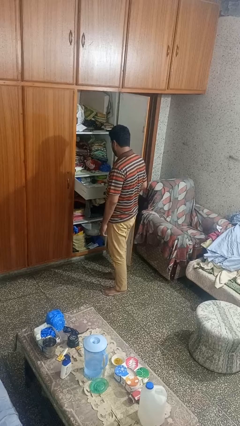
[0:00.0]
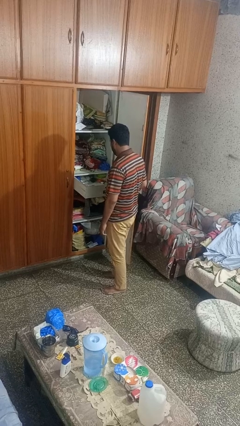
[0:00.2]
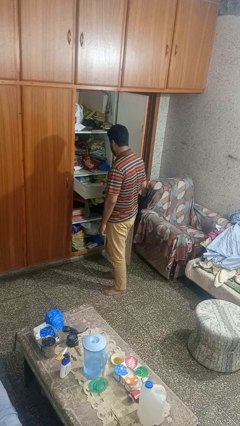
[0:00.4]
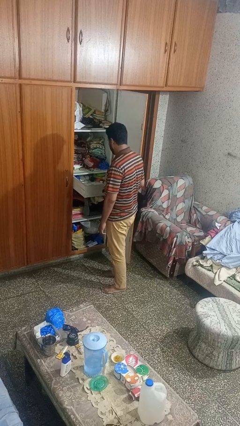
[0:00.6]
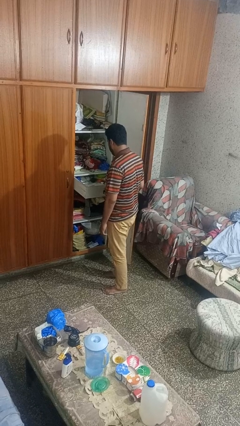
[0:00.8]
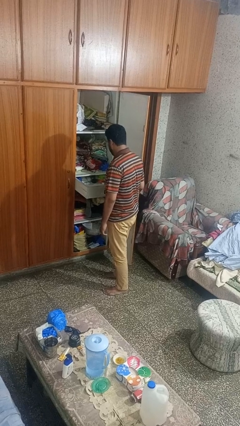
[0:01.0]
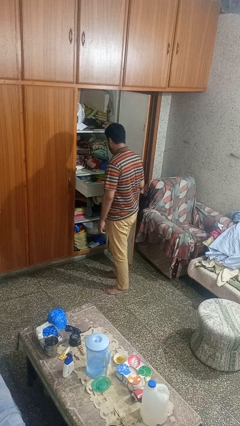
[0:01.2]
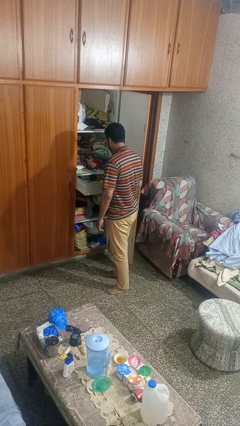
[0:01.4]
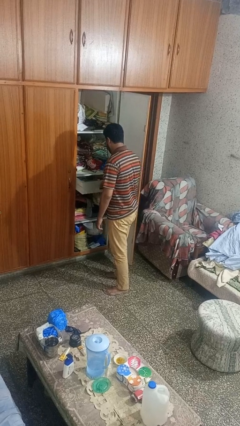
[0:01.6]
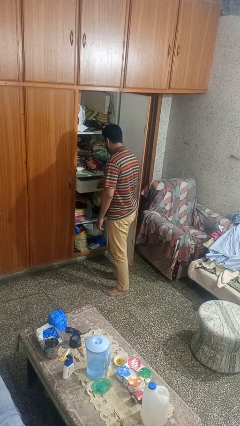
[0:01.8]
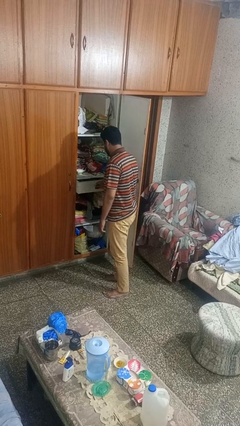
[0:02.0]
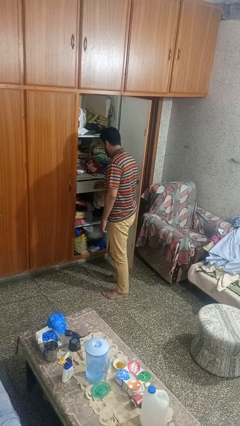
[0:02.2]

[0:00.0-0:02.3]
person closes dresser drawer

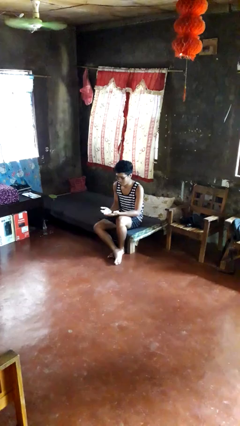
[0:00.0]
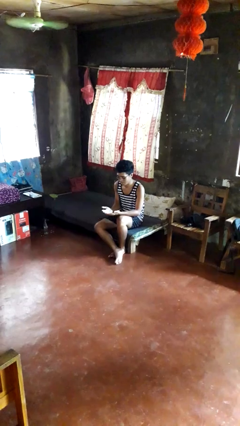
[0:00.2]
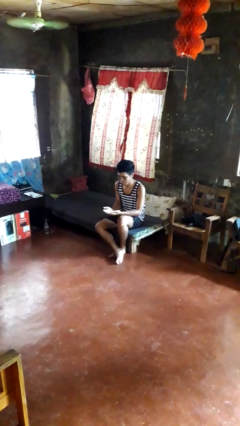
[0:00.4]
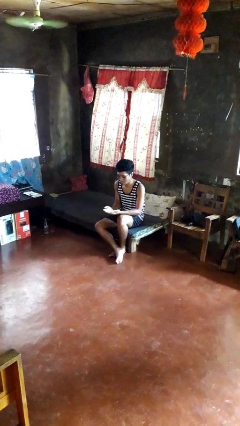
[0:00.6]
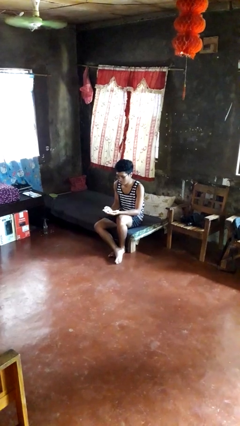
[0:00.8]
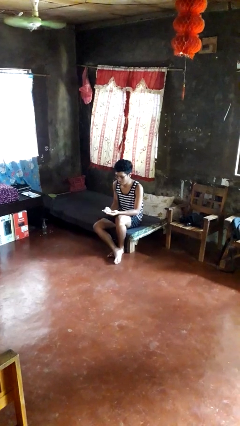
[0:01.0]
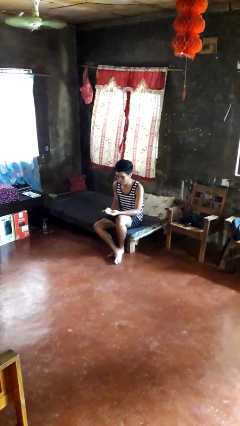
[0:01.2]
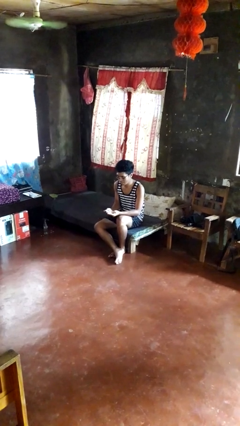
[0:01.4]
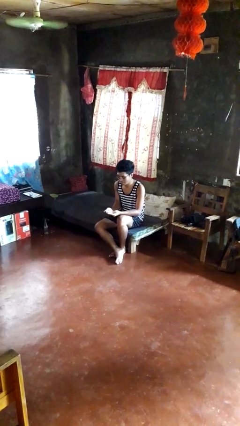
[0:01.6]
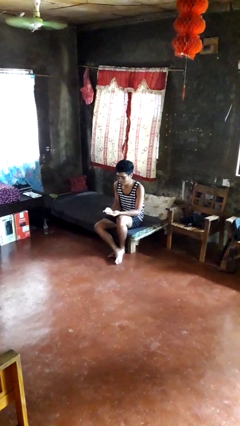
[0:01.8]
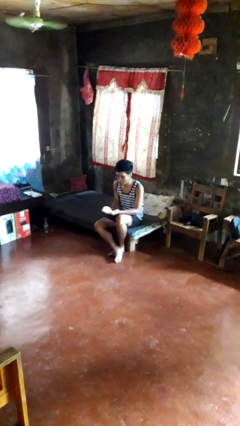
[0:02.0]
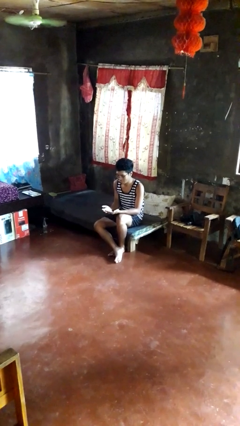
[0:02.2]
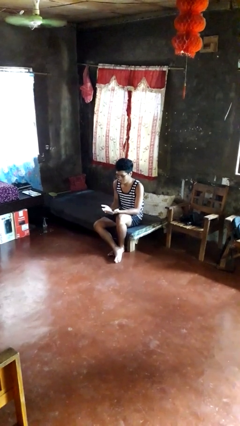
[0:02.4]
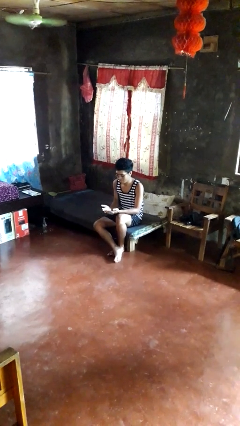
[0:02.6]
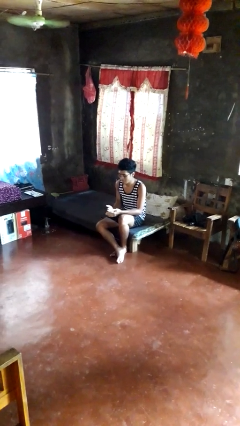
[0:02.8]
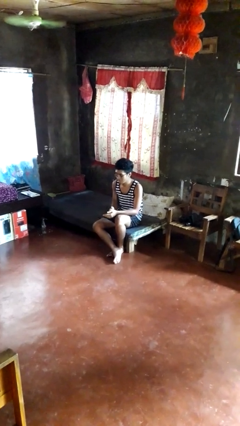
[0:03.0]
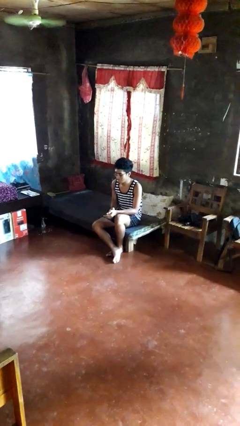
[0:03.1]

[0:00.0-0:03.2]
person looks at hands in lap

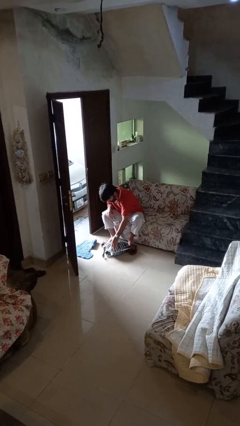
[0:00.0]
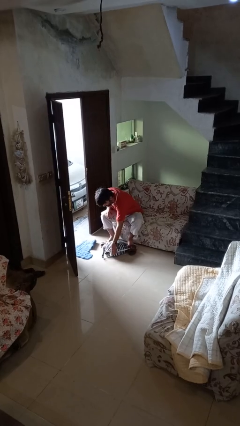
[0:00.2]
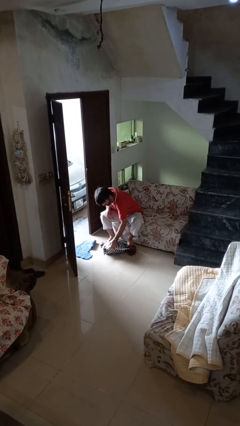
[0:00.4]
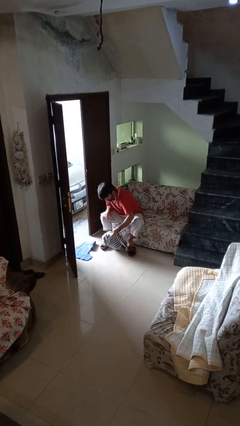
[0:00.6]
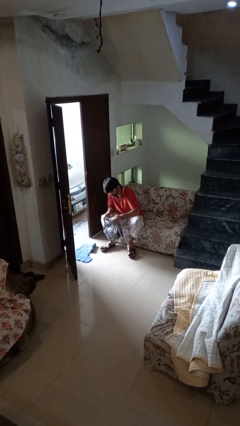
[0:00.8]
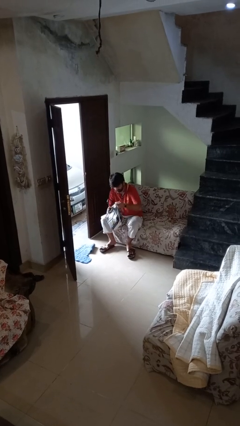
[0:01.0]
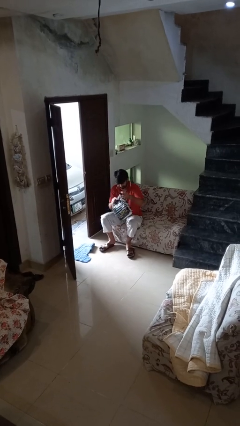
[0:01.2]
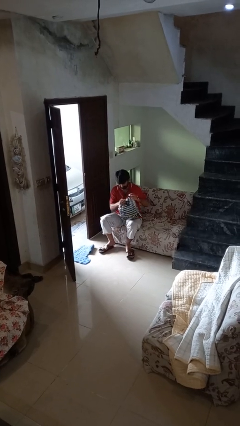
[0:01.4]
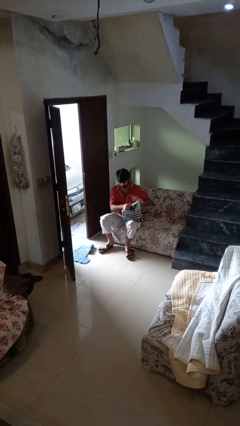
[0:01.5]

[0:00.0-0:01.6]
person picks up object from floor

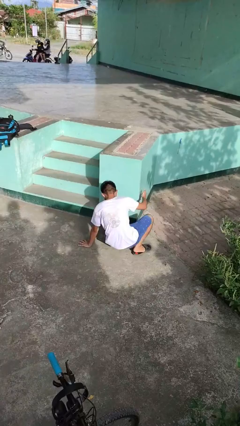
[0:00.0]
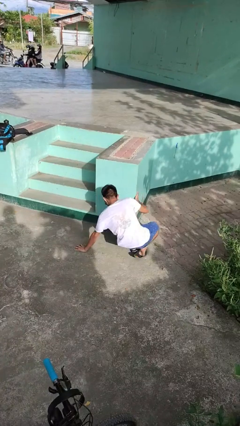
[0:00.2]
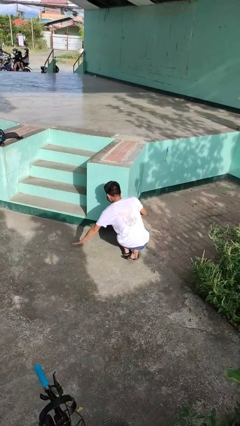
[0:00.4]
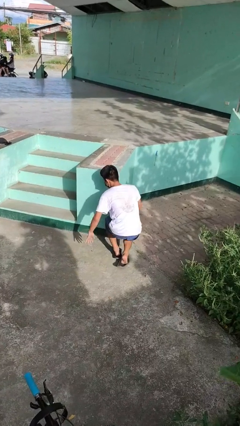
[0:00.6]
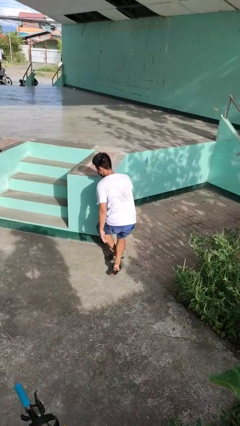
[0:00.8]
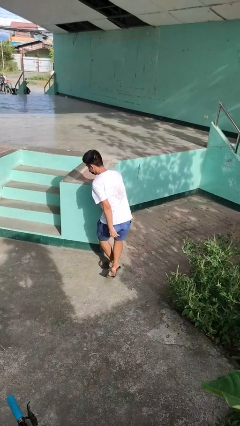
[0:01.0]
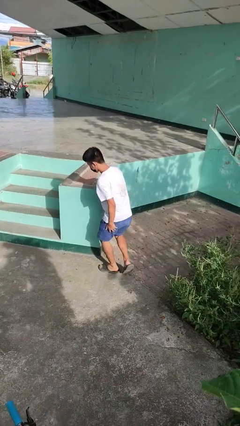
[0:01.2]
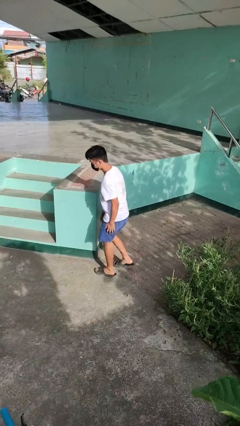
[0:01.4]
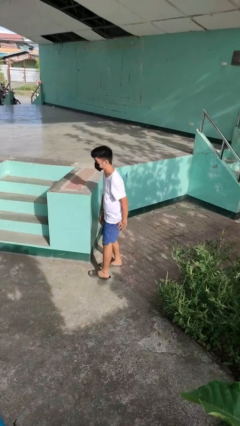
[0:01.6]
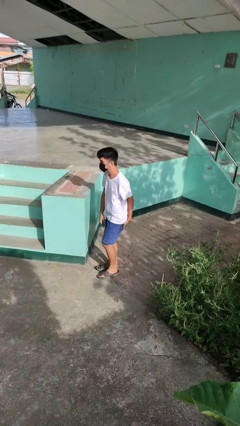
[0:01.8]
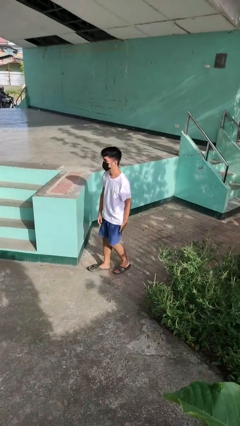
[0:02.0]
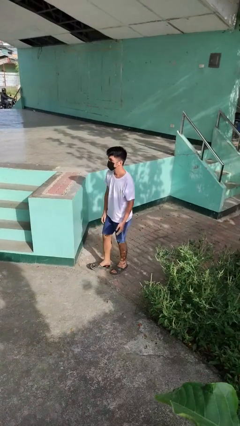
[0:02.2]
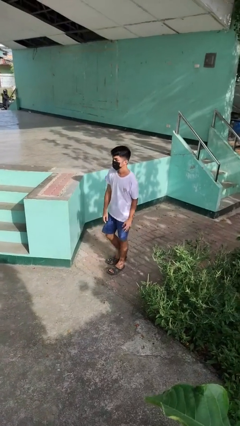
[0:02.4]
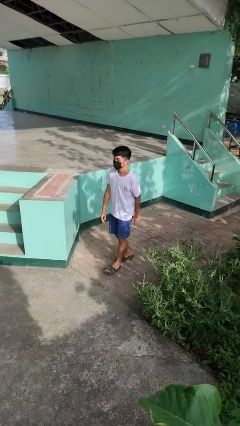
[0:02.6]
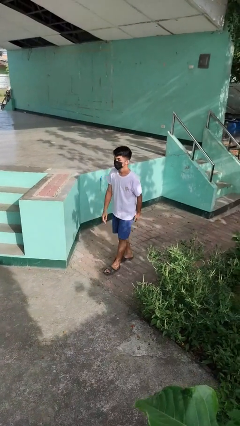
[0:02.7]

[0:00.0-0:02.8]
person stands up from floor

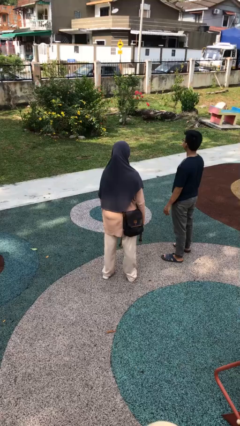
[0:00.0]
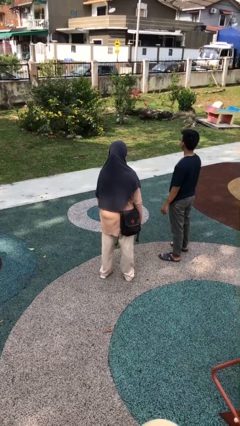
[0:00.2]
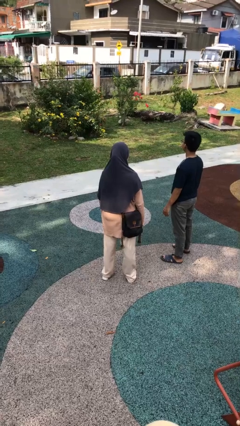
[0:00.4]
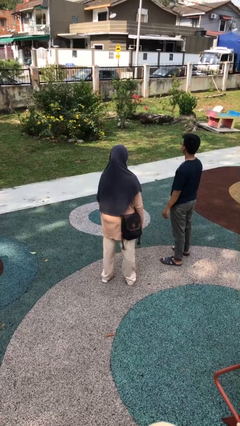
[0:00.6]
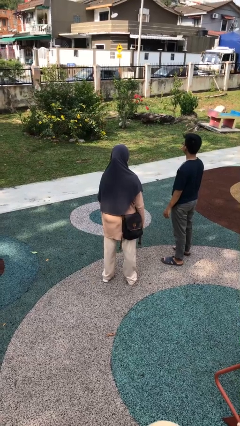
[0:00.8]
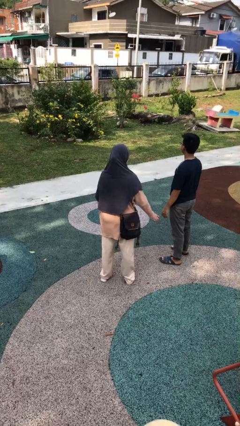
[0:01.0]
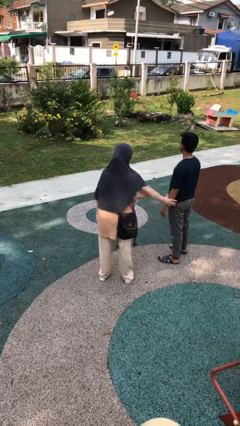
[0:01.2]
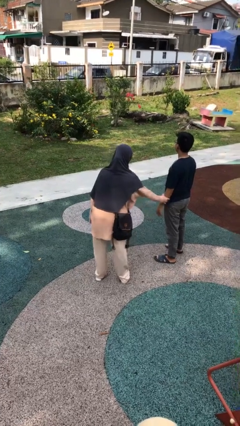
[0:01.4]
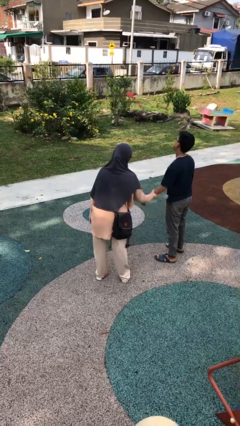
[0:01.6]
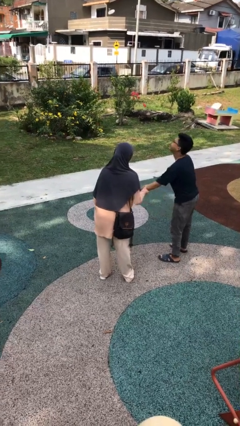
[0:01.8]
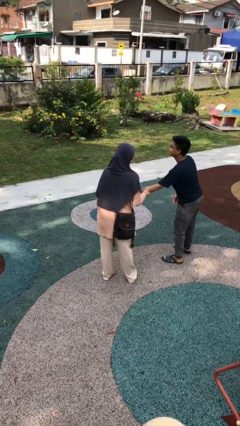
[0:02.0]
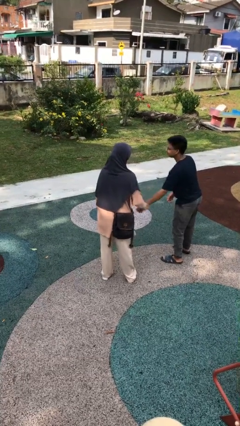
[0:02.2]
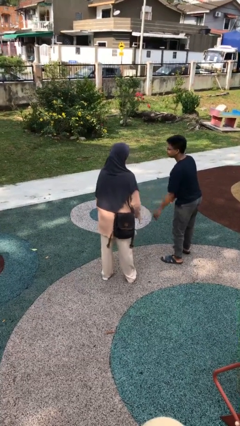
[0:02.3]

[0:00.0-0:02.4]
person grabs person by forearm

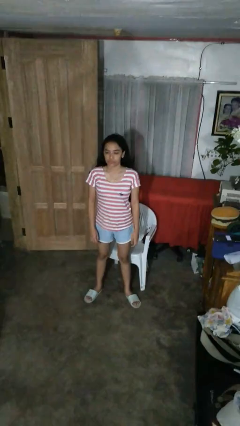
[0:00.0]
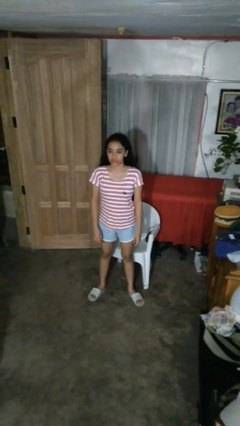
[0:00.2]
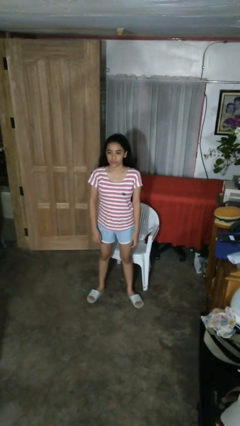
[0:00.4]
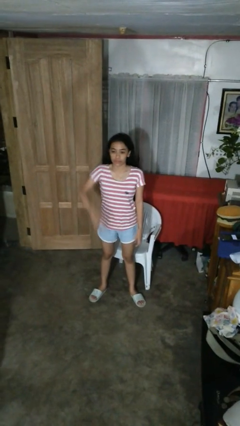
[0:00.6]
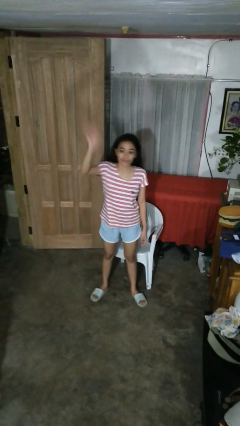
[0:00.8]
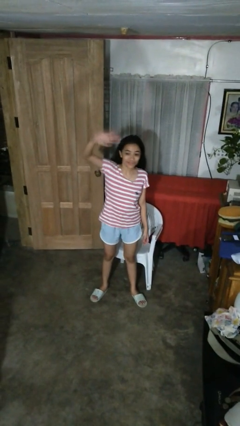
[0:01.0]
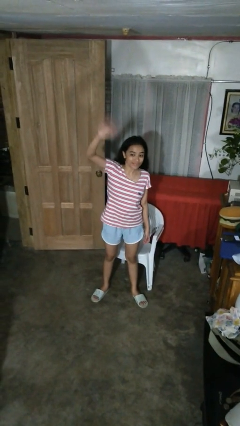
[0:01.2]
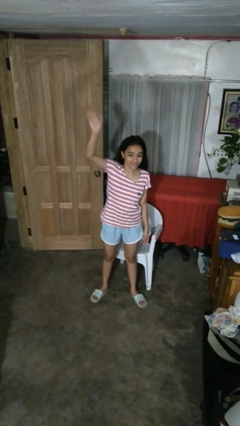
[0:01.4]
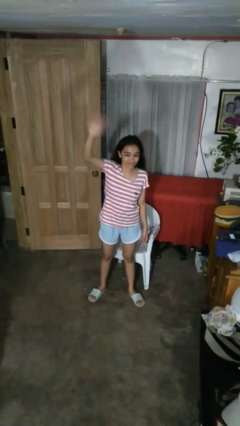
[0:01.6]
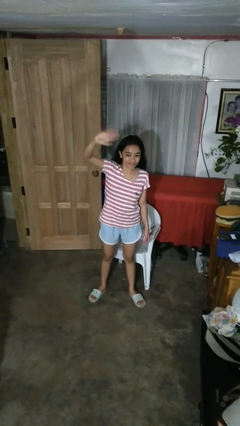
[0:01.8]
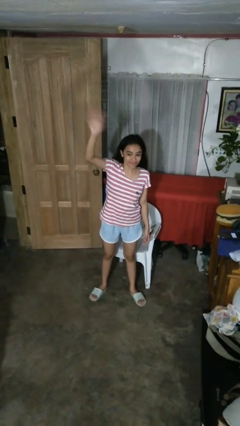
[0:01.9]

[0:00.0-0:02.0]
person waves at person

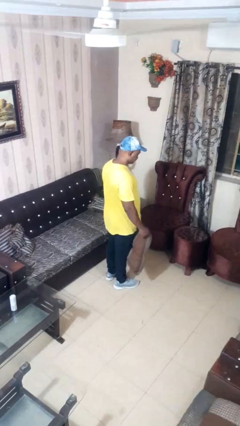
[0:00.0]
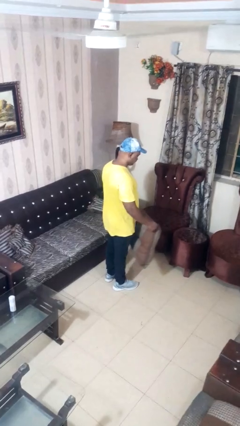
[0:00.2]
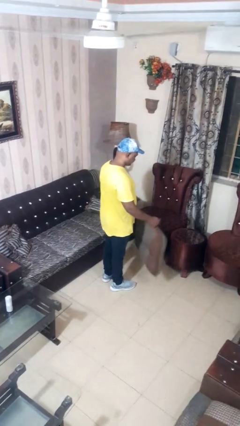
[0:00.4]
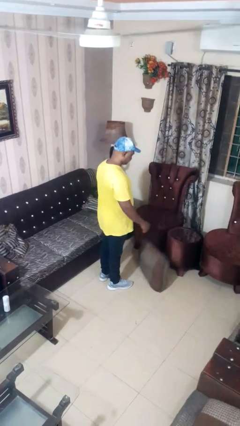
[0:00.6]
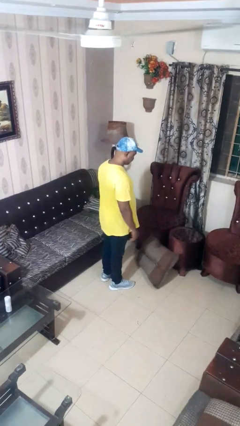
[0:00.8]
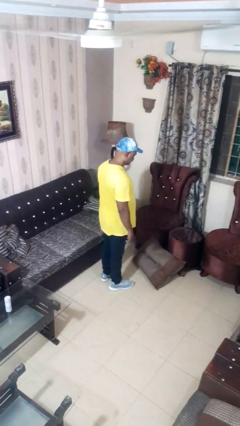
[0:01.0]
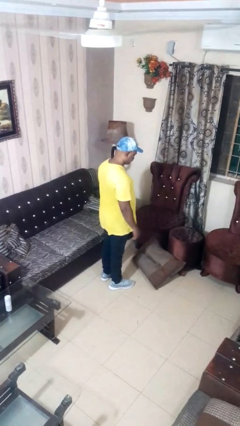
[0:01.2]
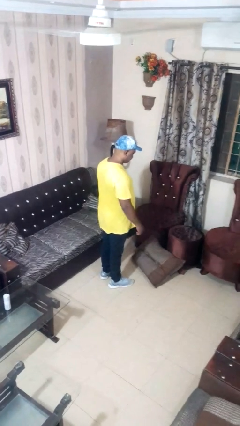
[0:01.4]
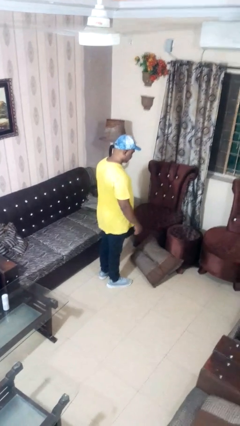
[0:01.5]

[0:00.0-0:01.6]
person throws object to ground

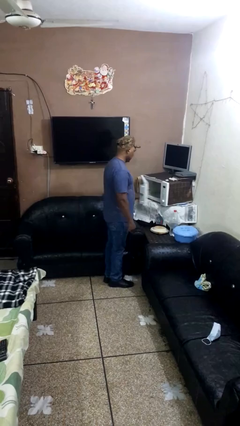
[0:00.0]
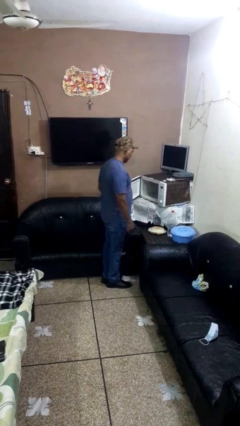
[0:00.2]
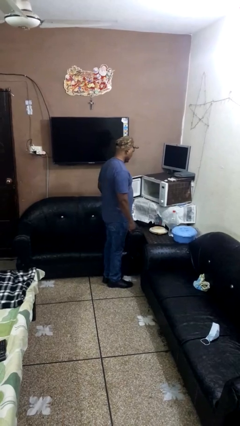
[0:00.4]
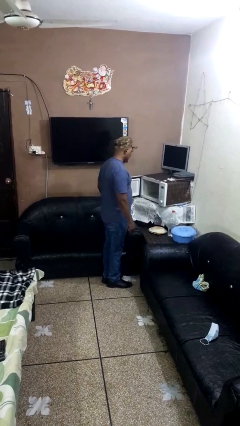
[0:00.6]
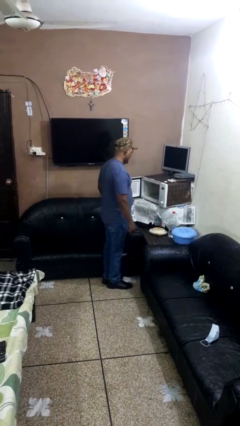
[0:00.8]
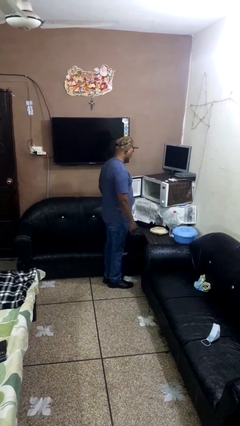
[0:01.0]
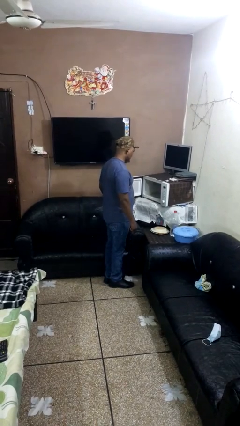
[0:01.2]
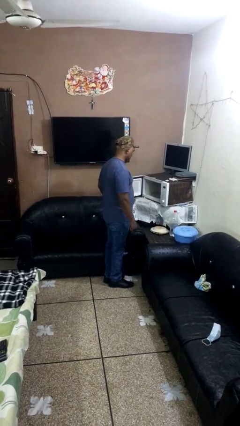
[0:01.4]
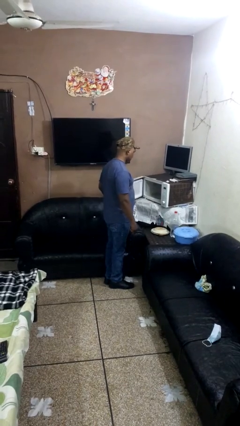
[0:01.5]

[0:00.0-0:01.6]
person opens oven door
